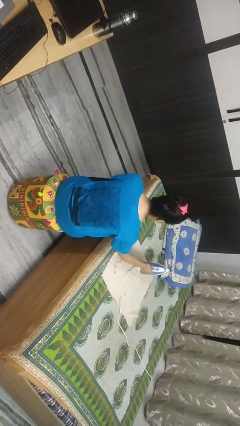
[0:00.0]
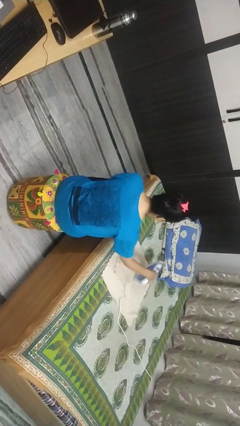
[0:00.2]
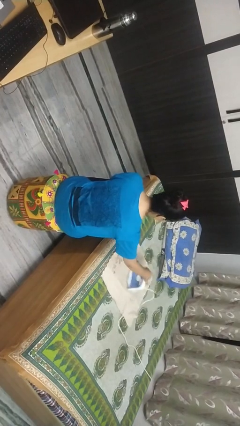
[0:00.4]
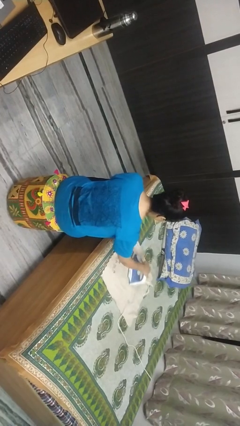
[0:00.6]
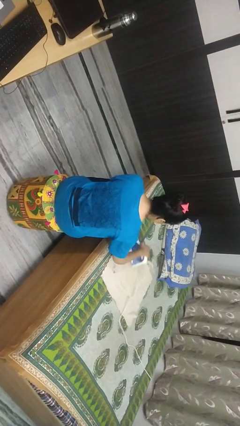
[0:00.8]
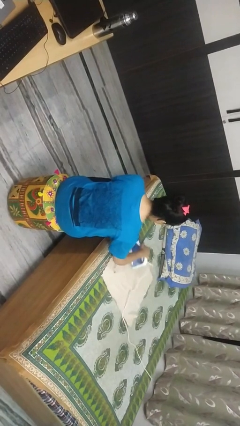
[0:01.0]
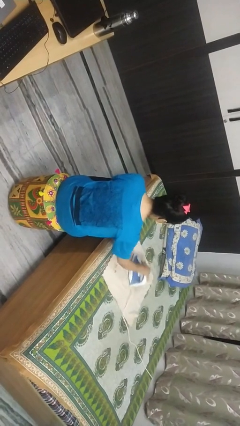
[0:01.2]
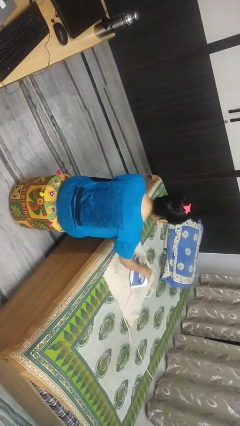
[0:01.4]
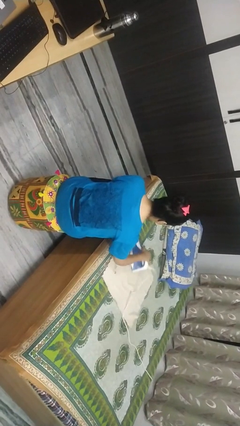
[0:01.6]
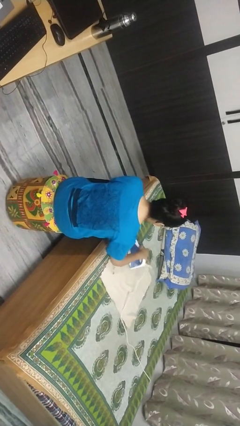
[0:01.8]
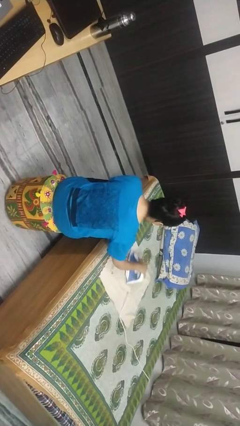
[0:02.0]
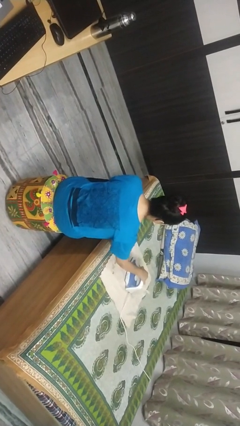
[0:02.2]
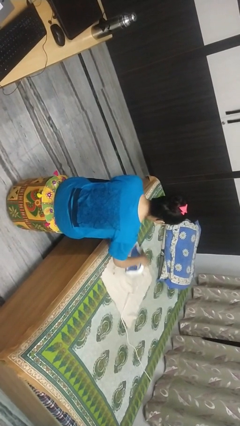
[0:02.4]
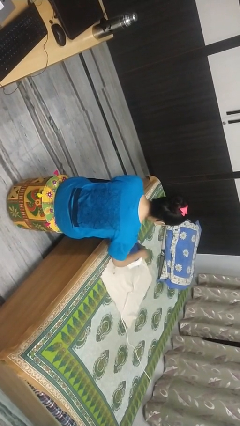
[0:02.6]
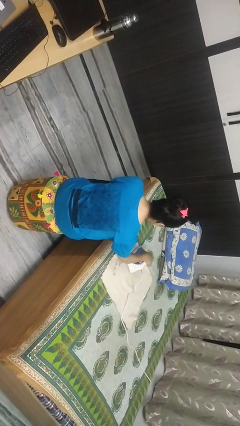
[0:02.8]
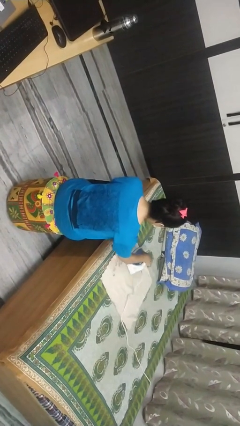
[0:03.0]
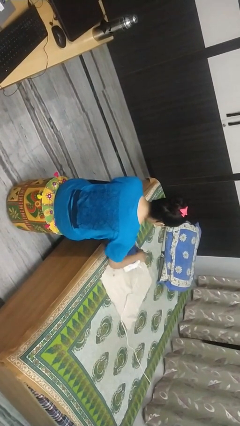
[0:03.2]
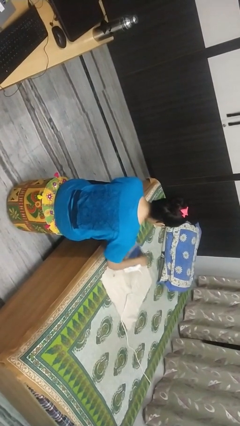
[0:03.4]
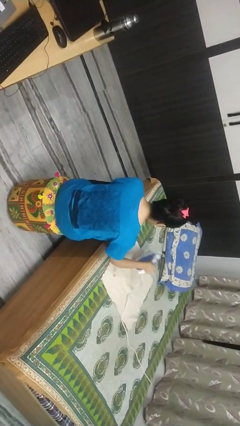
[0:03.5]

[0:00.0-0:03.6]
person irons clothes

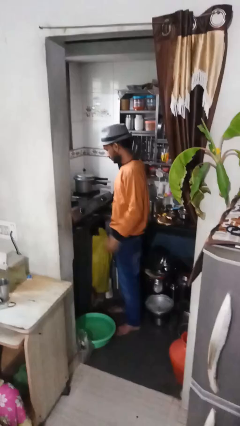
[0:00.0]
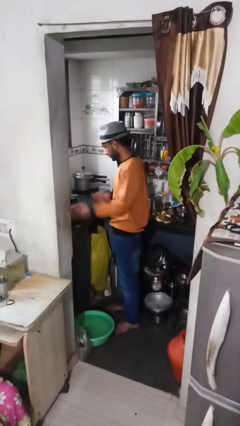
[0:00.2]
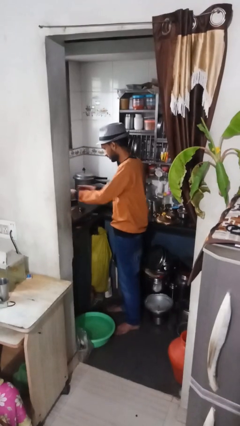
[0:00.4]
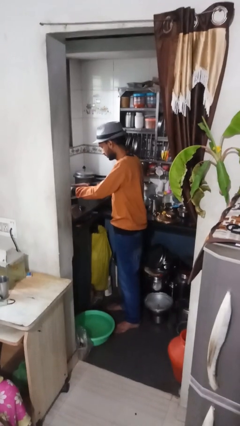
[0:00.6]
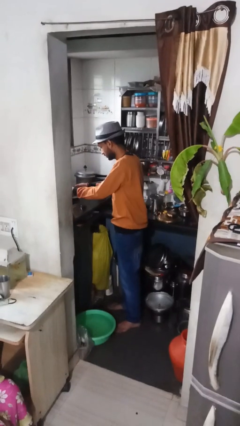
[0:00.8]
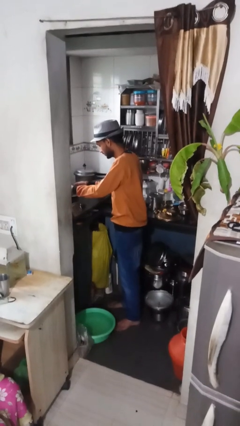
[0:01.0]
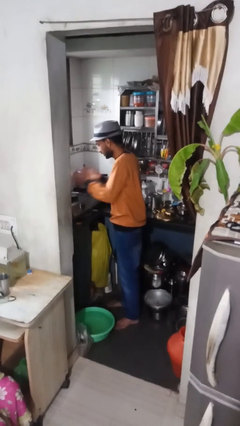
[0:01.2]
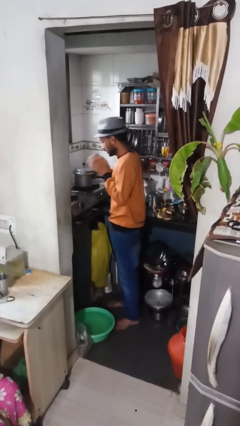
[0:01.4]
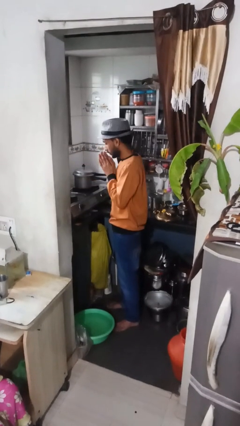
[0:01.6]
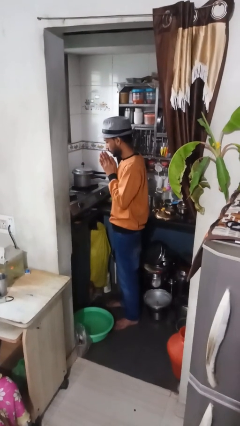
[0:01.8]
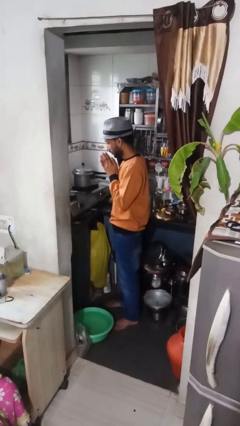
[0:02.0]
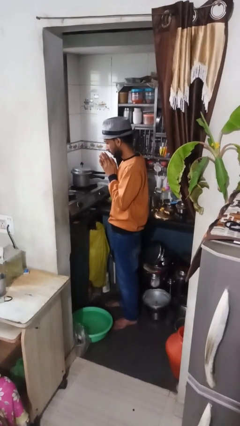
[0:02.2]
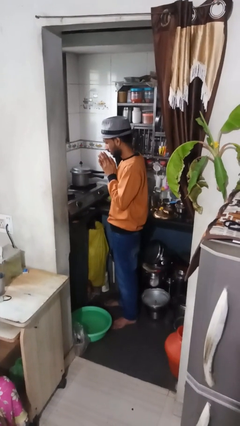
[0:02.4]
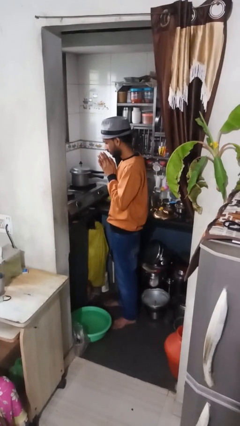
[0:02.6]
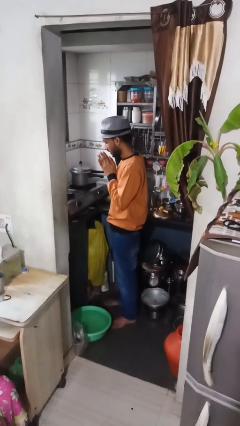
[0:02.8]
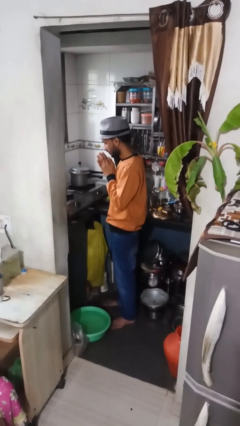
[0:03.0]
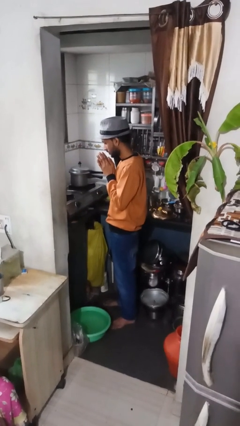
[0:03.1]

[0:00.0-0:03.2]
person burns hand

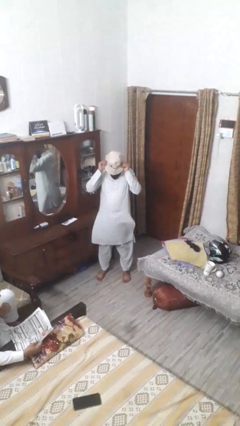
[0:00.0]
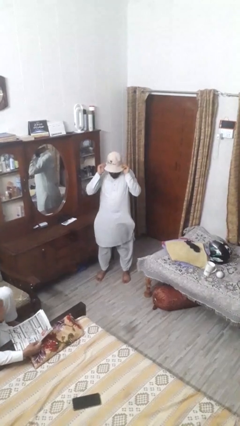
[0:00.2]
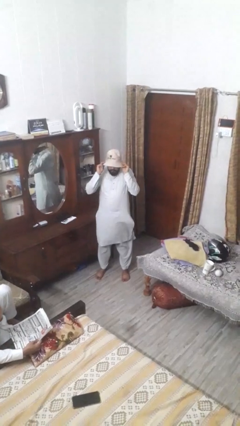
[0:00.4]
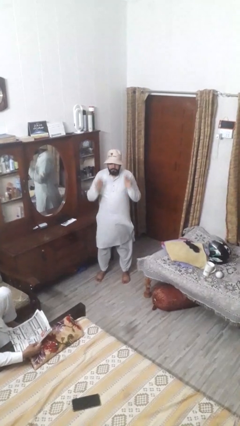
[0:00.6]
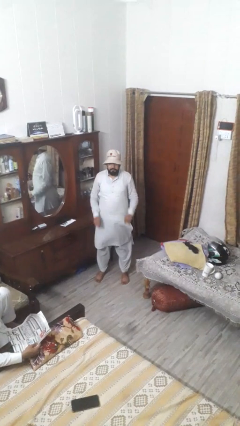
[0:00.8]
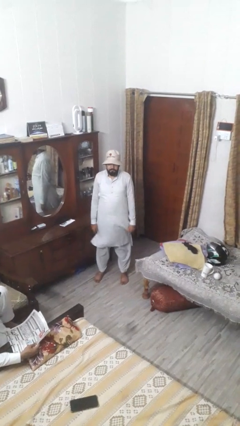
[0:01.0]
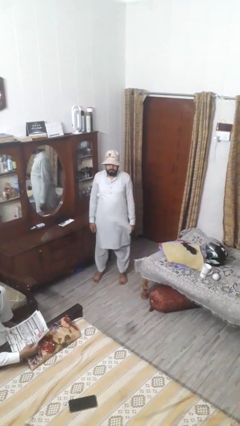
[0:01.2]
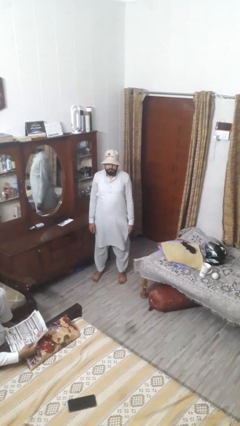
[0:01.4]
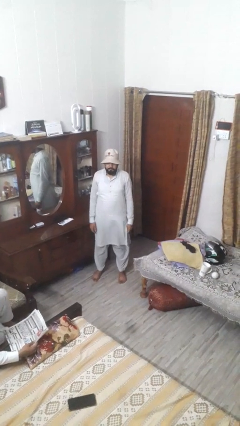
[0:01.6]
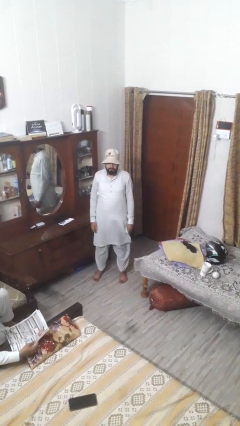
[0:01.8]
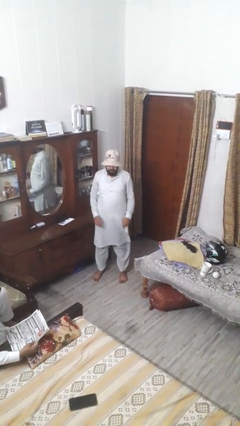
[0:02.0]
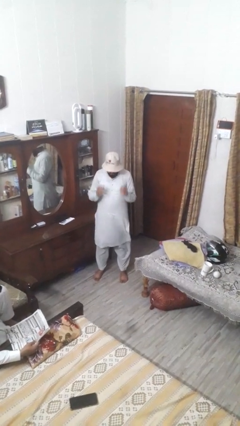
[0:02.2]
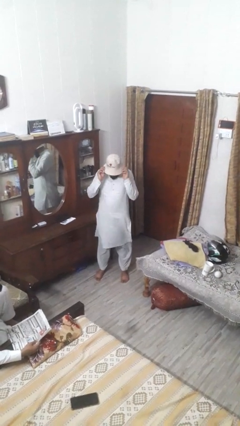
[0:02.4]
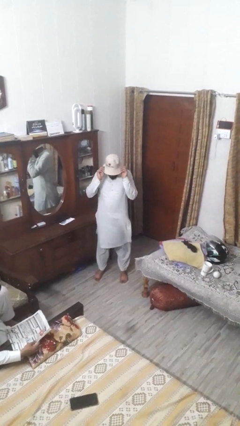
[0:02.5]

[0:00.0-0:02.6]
person puts on hat

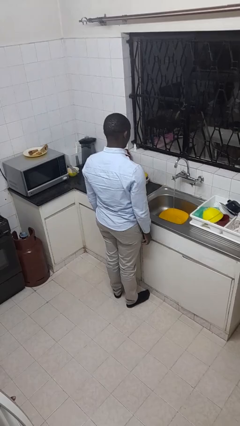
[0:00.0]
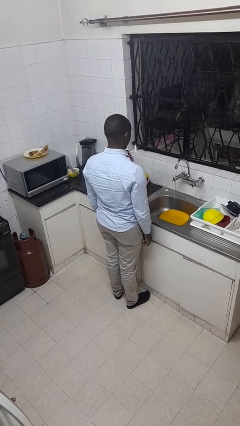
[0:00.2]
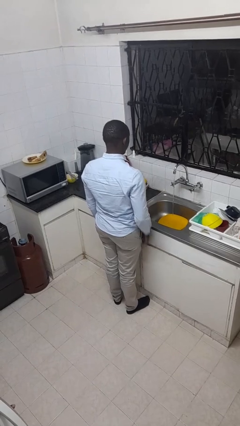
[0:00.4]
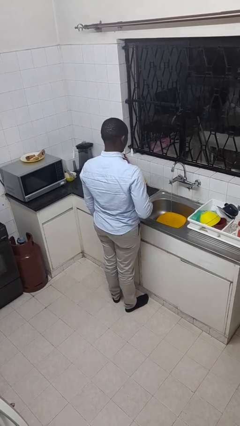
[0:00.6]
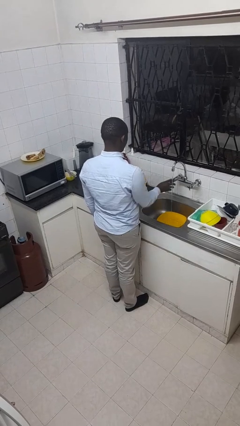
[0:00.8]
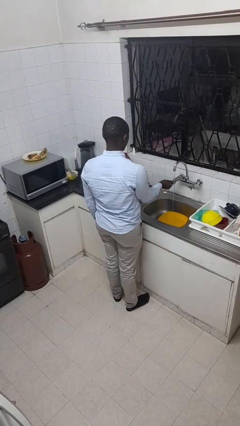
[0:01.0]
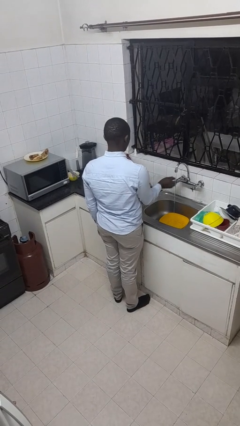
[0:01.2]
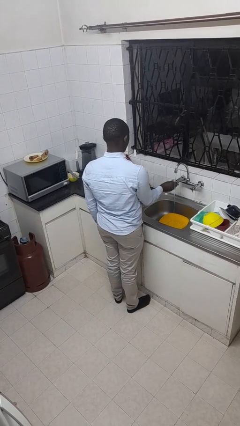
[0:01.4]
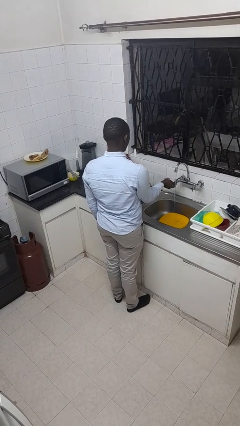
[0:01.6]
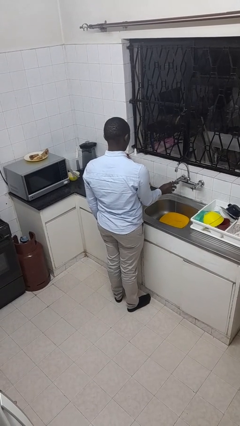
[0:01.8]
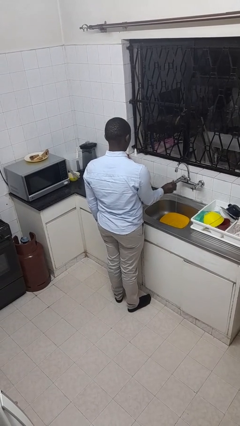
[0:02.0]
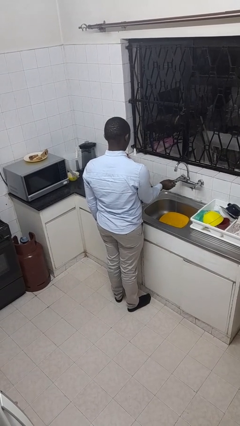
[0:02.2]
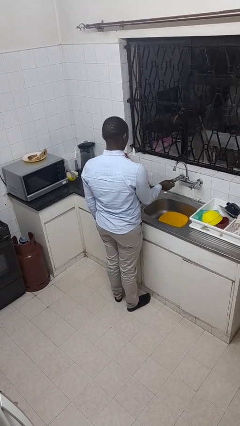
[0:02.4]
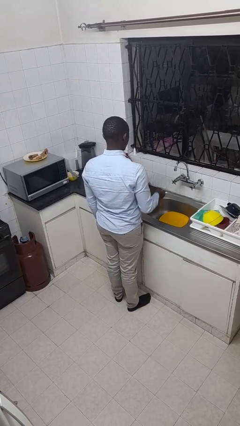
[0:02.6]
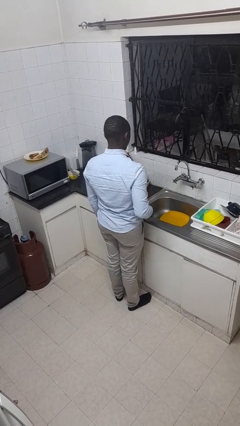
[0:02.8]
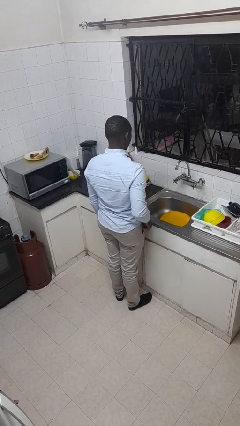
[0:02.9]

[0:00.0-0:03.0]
person turns off faucet

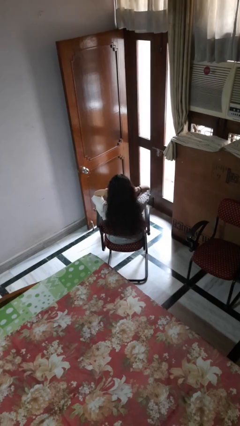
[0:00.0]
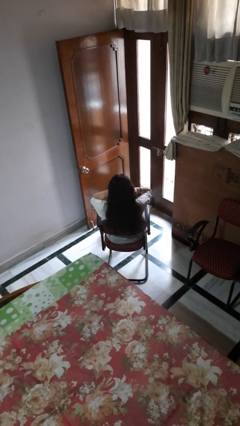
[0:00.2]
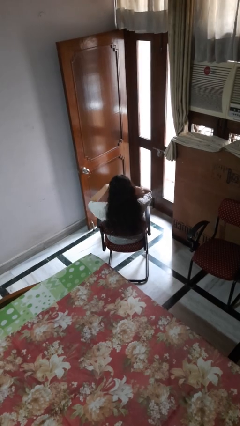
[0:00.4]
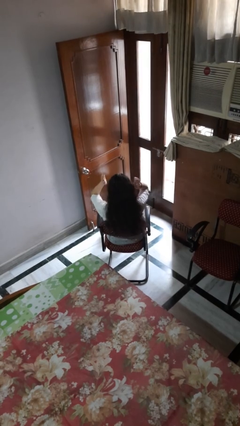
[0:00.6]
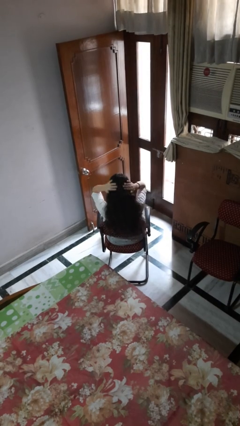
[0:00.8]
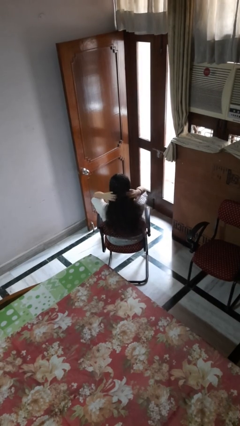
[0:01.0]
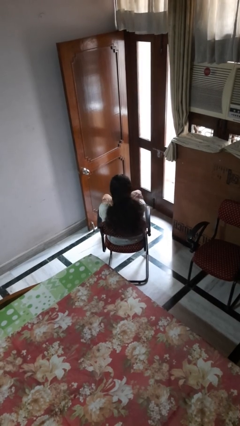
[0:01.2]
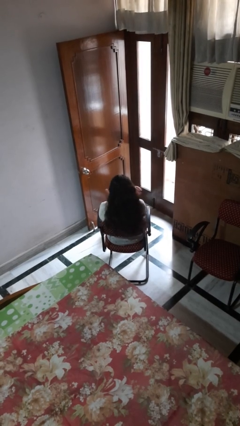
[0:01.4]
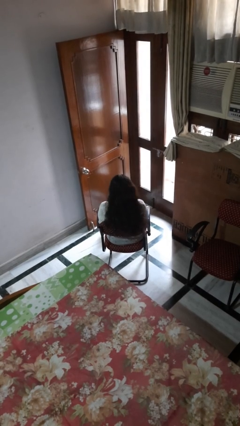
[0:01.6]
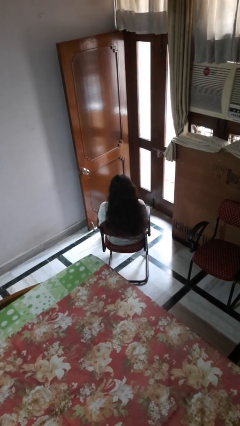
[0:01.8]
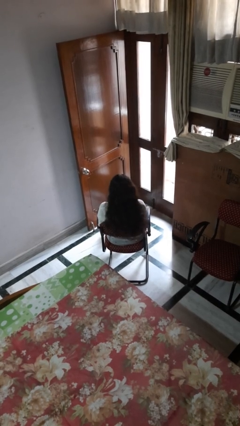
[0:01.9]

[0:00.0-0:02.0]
person strokes hair

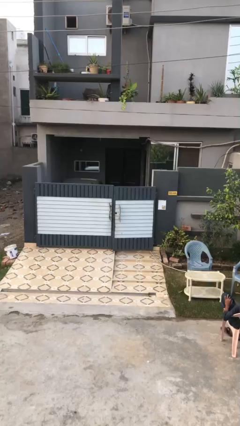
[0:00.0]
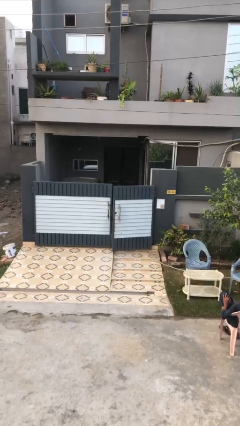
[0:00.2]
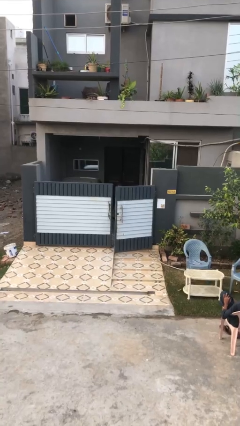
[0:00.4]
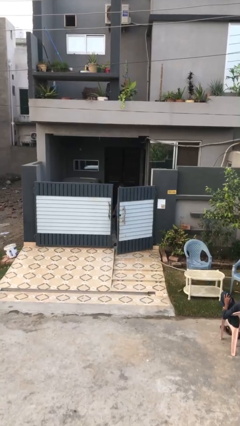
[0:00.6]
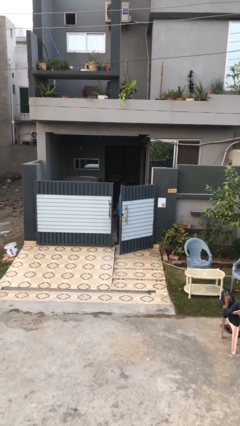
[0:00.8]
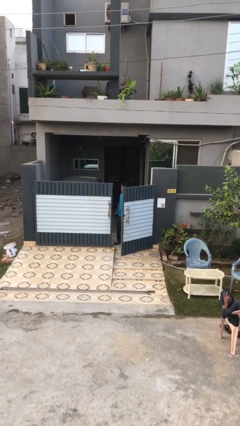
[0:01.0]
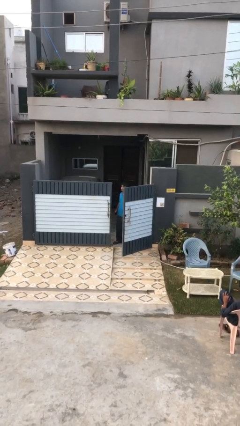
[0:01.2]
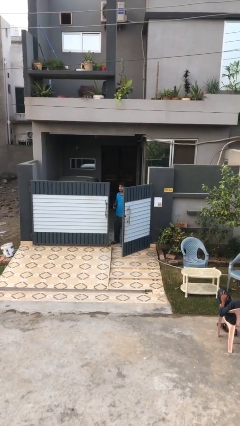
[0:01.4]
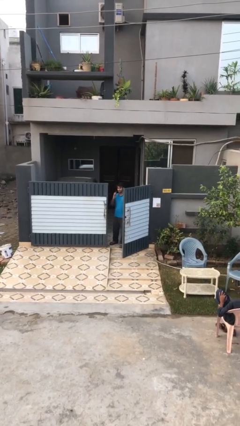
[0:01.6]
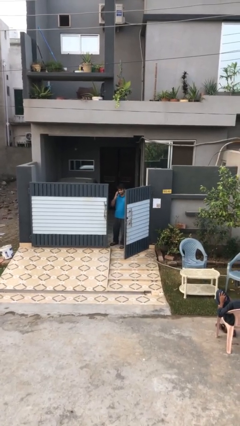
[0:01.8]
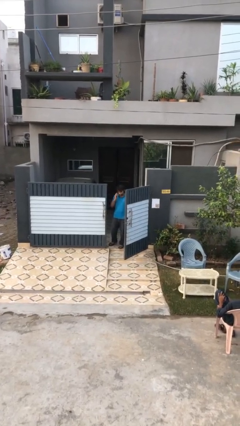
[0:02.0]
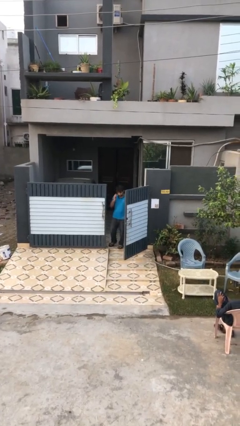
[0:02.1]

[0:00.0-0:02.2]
person opens facility door

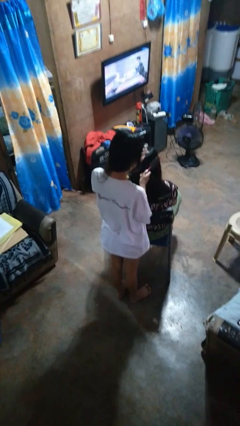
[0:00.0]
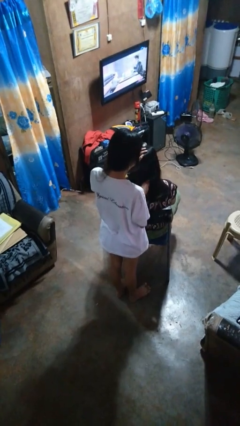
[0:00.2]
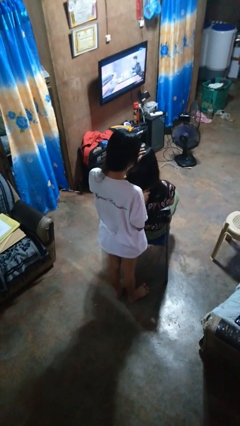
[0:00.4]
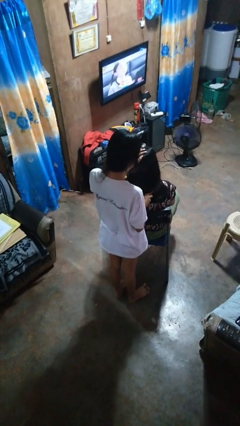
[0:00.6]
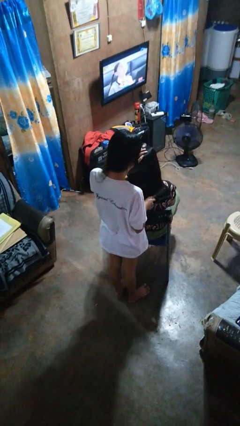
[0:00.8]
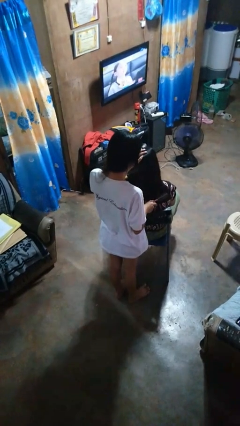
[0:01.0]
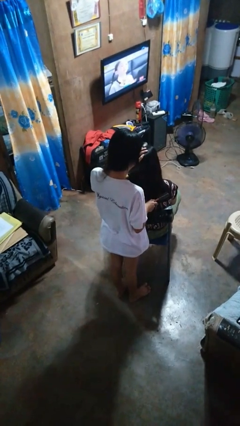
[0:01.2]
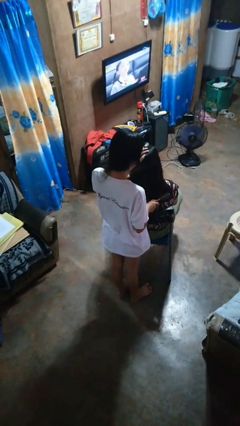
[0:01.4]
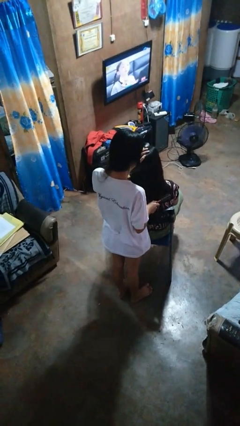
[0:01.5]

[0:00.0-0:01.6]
person brushes hair of person
